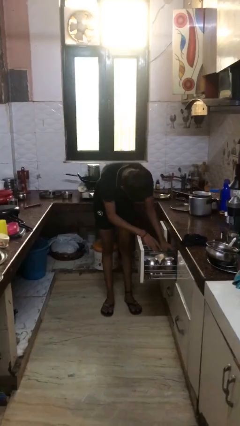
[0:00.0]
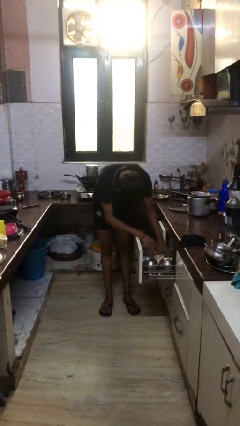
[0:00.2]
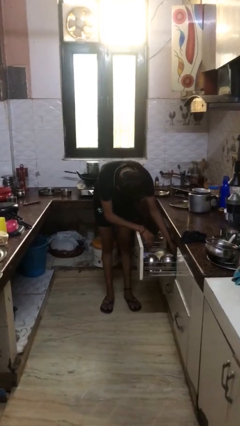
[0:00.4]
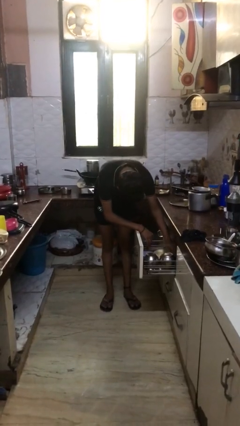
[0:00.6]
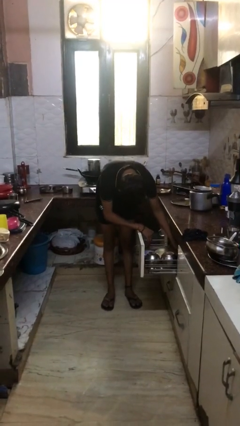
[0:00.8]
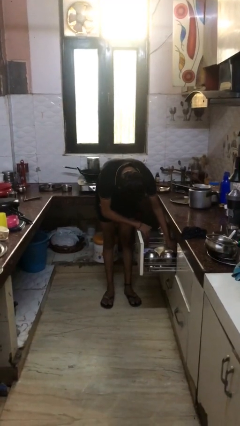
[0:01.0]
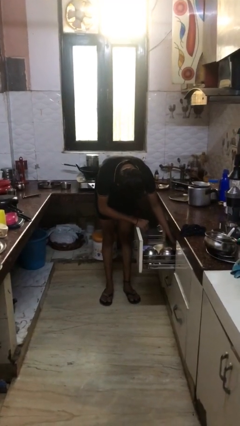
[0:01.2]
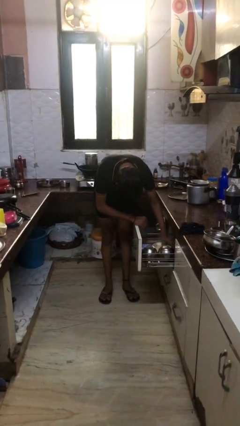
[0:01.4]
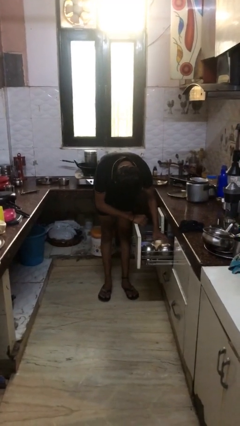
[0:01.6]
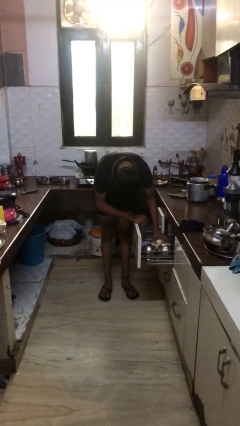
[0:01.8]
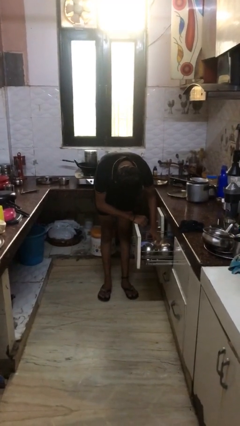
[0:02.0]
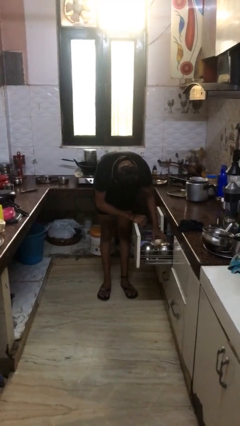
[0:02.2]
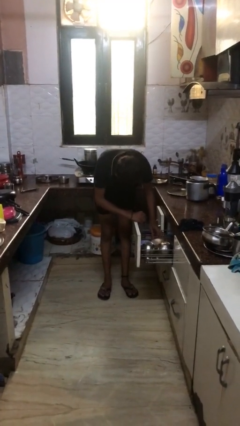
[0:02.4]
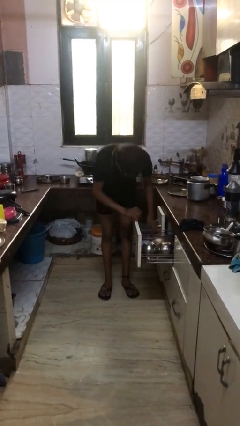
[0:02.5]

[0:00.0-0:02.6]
person searches in kitchen drawer

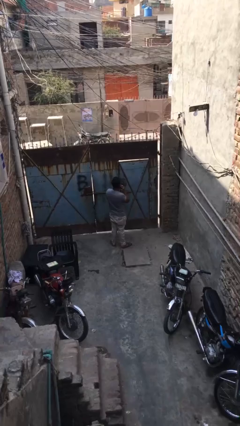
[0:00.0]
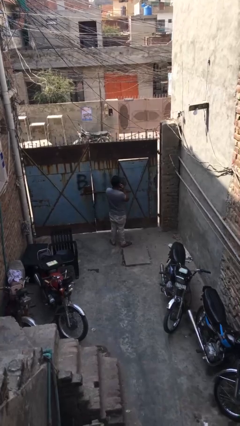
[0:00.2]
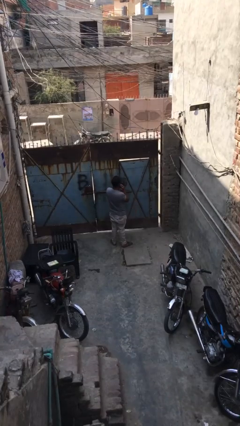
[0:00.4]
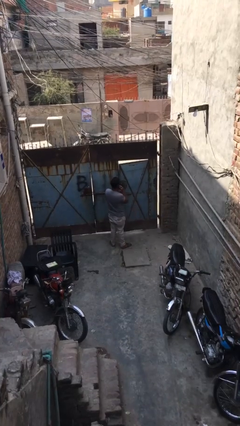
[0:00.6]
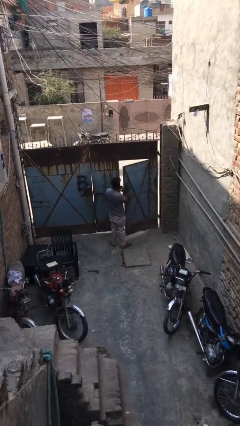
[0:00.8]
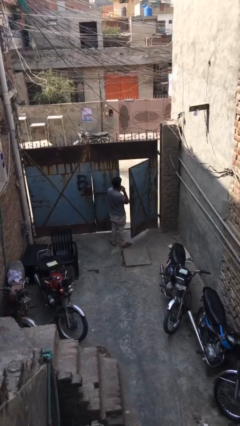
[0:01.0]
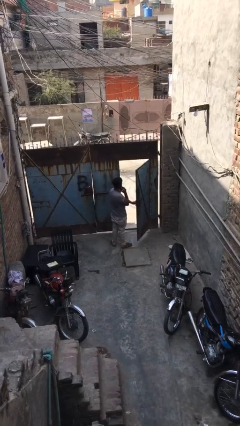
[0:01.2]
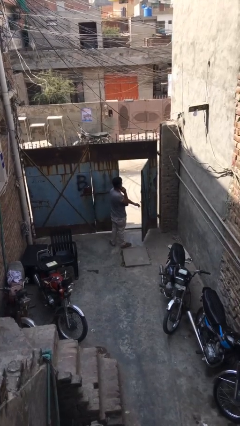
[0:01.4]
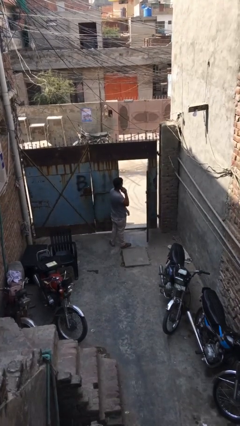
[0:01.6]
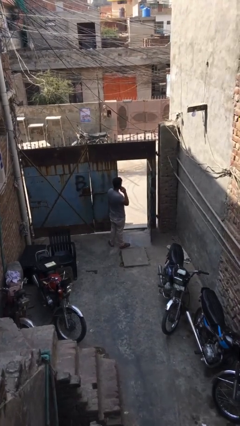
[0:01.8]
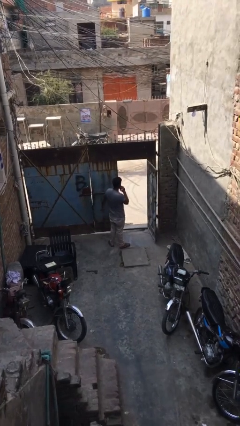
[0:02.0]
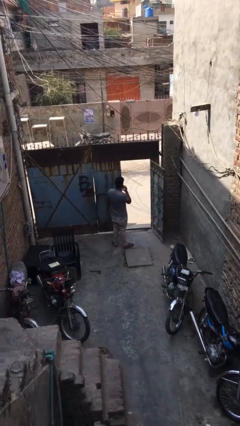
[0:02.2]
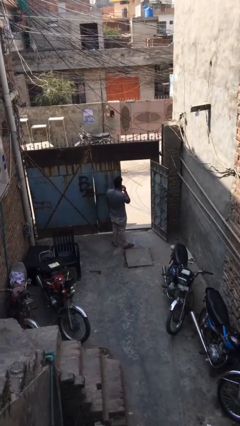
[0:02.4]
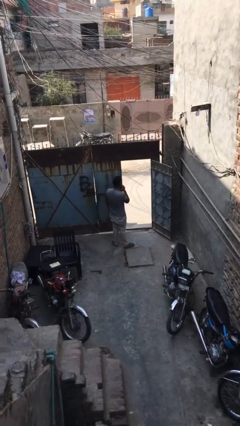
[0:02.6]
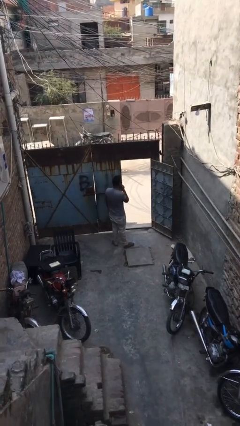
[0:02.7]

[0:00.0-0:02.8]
person opens facility door

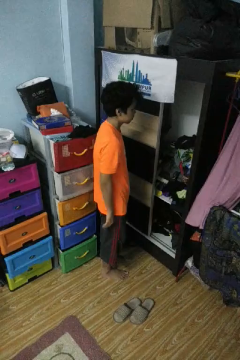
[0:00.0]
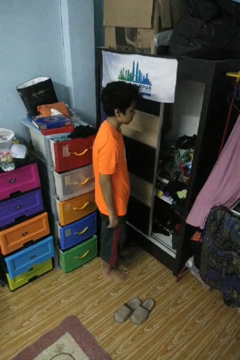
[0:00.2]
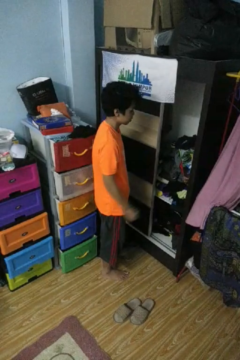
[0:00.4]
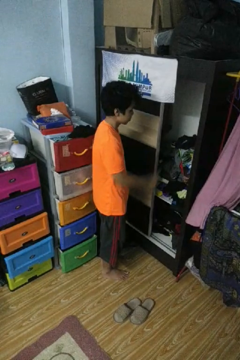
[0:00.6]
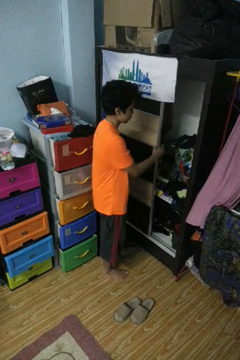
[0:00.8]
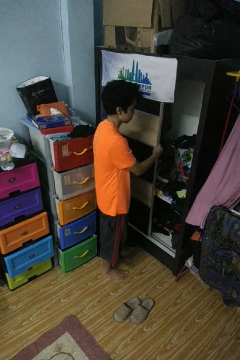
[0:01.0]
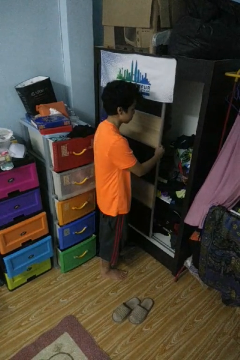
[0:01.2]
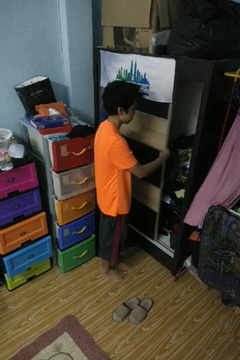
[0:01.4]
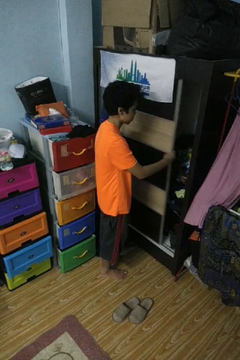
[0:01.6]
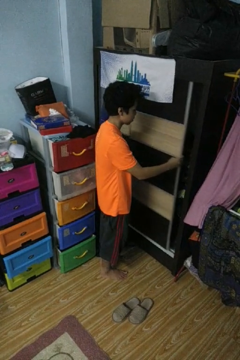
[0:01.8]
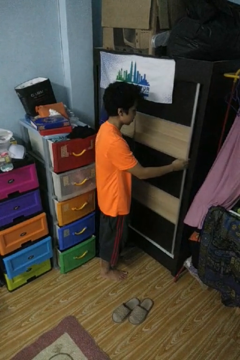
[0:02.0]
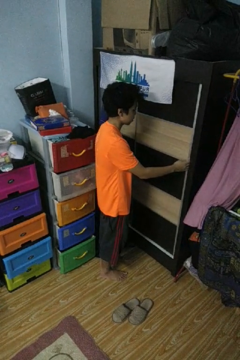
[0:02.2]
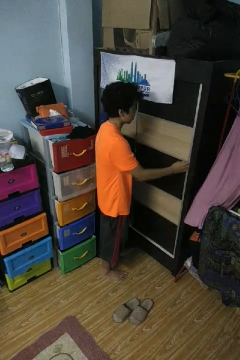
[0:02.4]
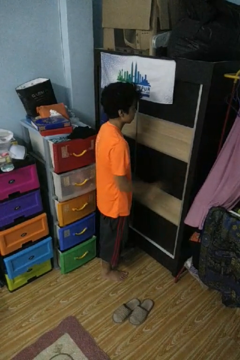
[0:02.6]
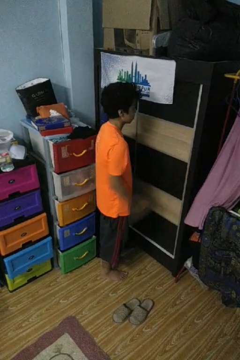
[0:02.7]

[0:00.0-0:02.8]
person closes closet door

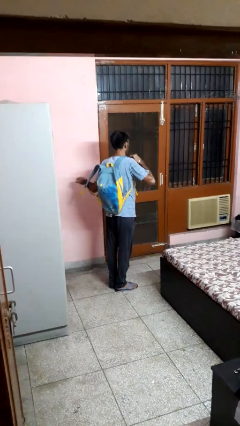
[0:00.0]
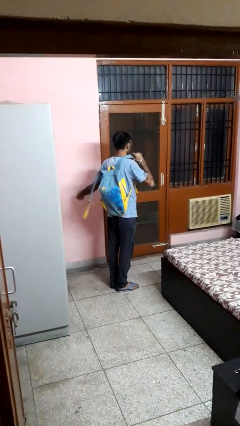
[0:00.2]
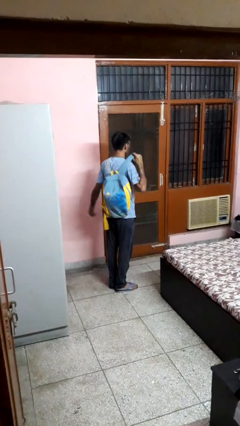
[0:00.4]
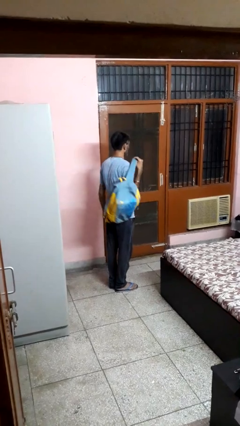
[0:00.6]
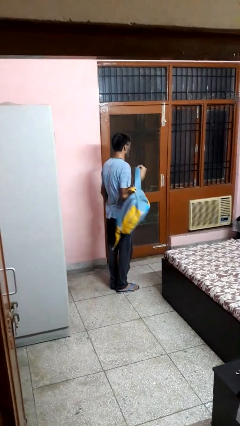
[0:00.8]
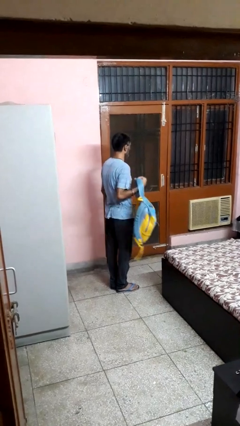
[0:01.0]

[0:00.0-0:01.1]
person takes off backpack

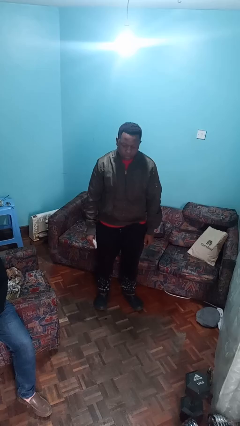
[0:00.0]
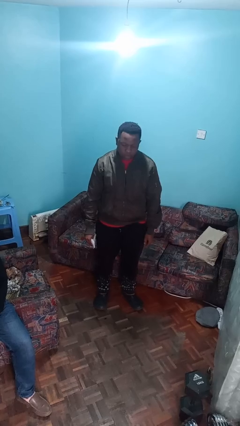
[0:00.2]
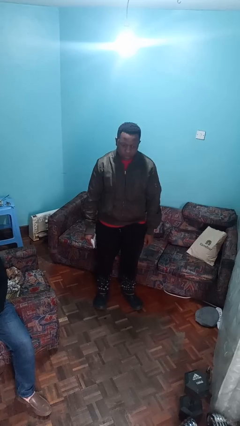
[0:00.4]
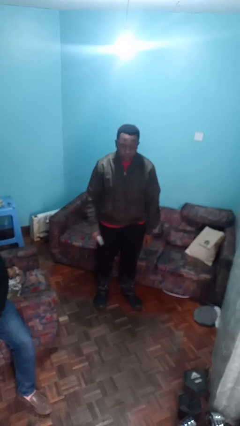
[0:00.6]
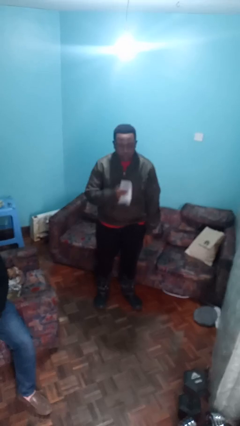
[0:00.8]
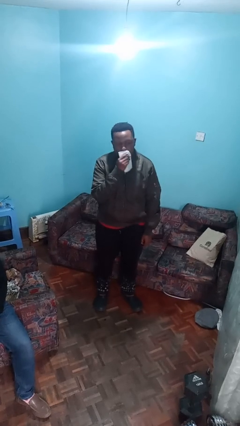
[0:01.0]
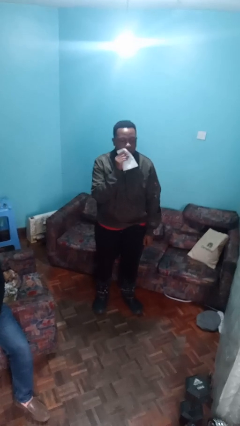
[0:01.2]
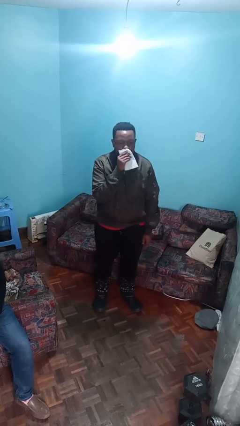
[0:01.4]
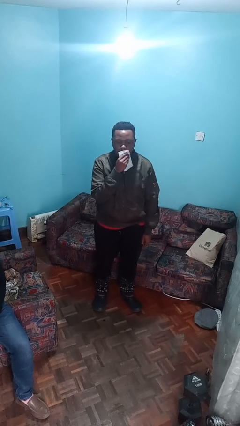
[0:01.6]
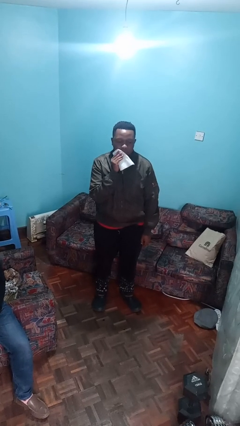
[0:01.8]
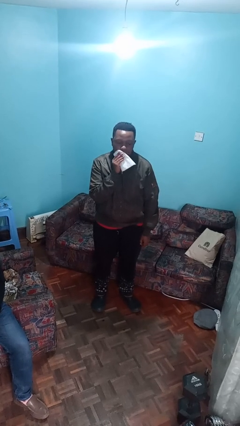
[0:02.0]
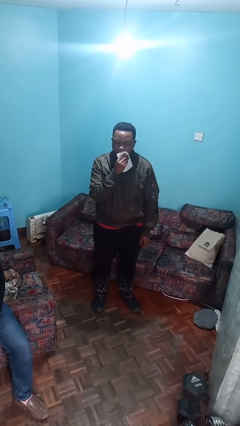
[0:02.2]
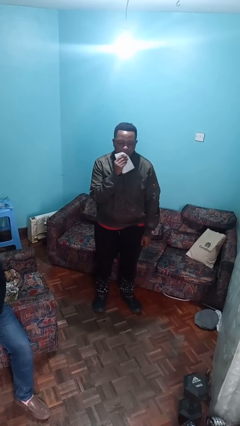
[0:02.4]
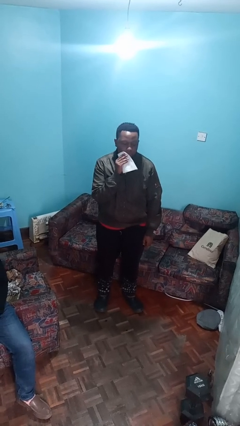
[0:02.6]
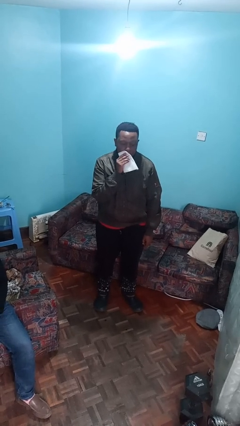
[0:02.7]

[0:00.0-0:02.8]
person wipes mouth with napkin

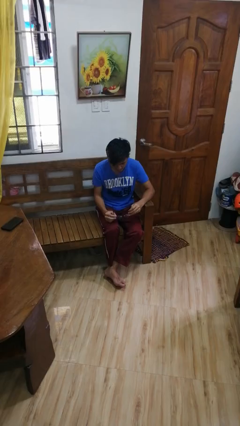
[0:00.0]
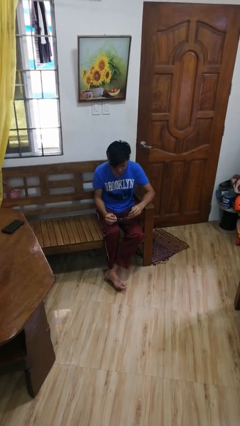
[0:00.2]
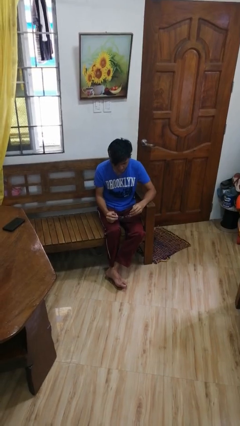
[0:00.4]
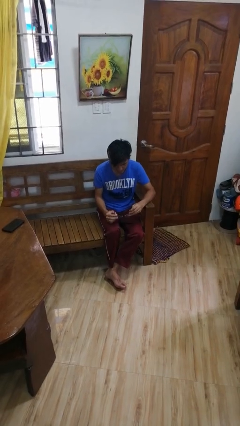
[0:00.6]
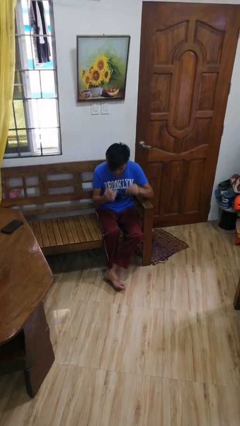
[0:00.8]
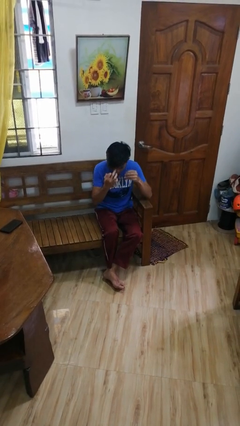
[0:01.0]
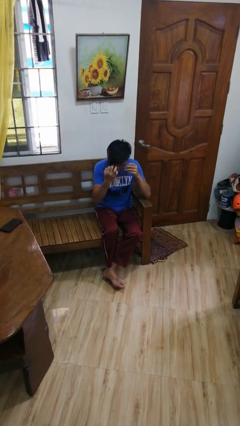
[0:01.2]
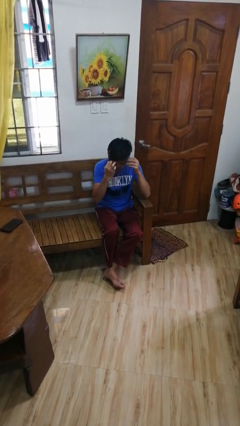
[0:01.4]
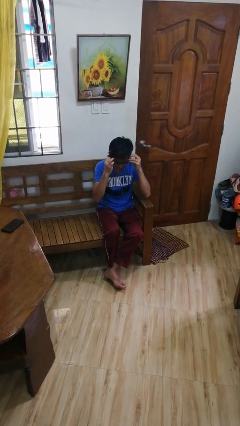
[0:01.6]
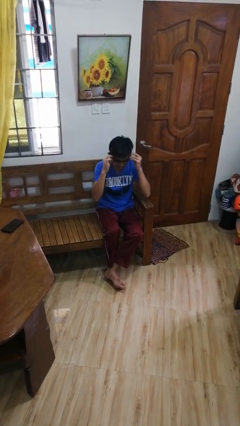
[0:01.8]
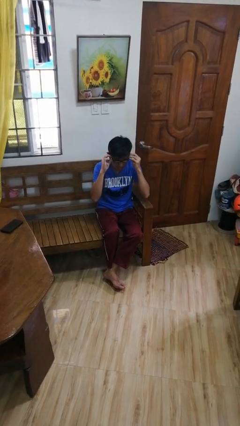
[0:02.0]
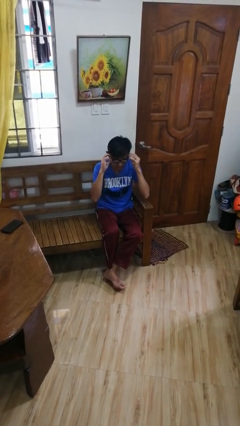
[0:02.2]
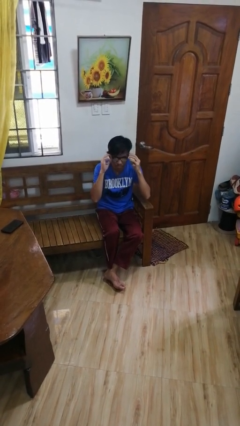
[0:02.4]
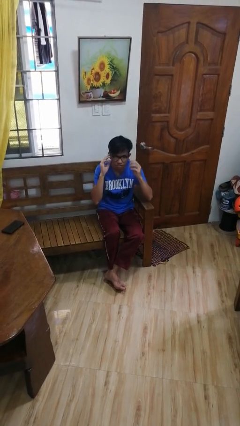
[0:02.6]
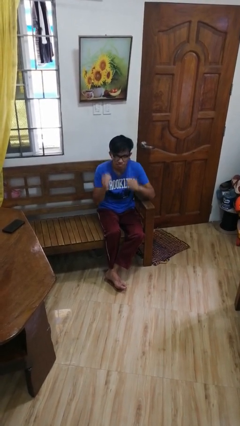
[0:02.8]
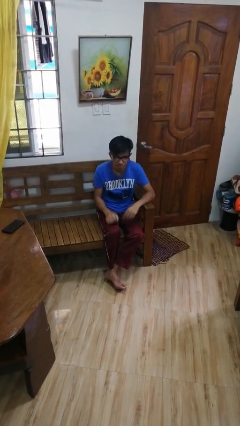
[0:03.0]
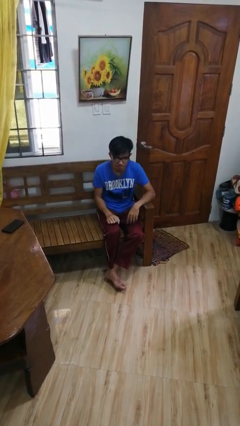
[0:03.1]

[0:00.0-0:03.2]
person puts on glasses

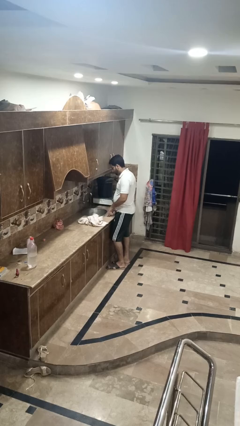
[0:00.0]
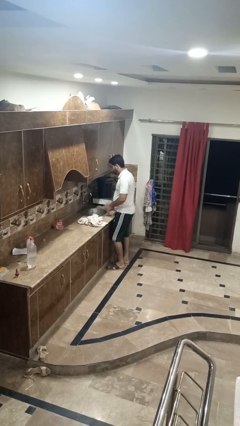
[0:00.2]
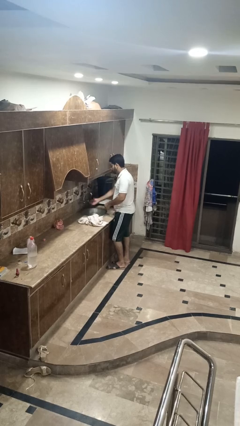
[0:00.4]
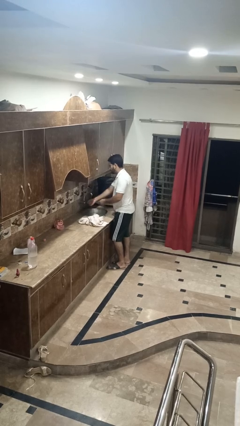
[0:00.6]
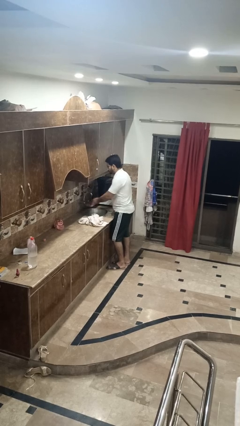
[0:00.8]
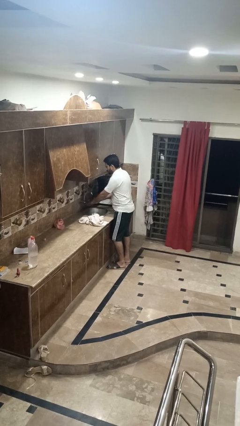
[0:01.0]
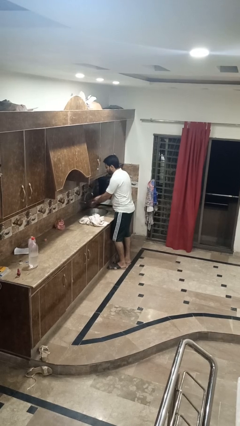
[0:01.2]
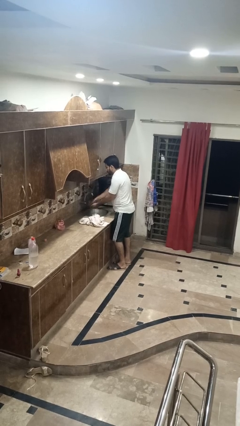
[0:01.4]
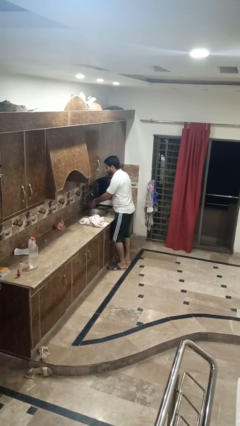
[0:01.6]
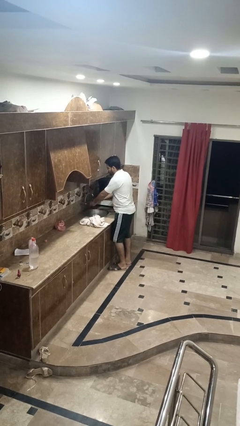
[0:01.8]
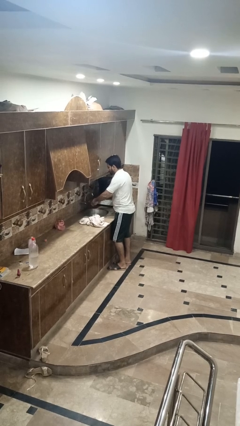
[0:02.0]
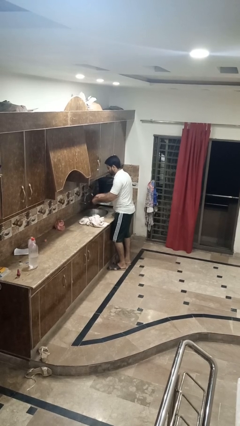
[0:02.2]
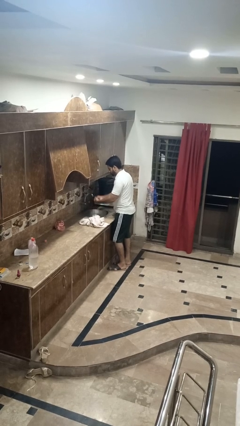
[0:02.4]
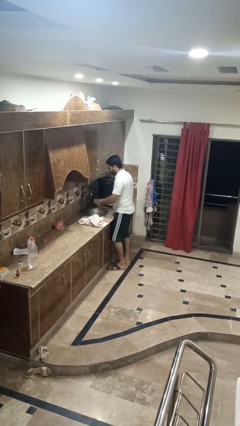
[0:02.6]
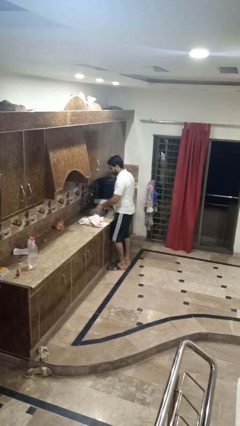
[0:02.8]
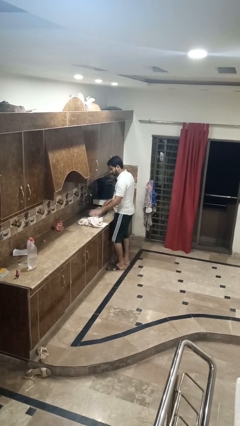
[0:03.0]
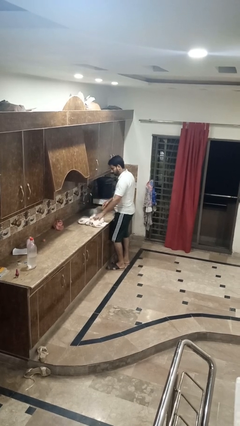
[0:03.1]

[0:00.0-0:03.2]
person washes hands
